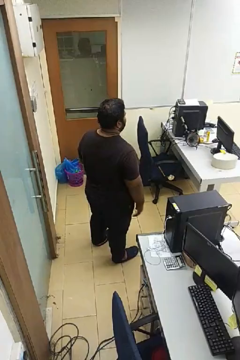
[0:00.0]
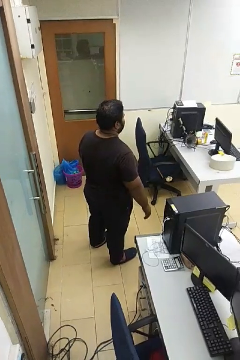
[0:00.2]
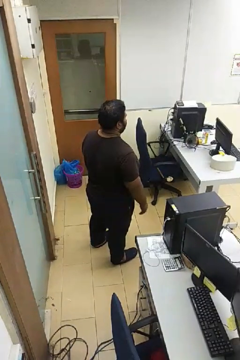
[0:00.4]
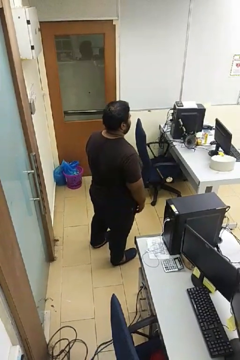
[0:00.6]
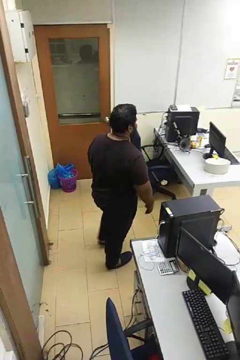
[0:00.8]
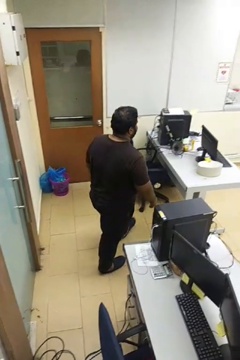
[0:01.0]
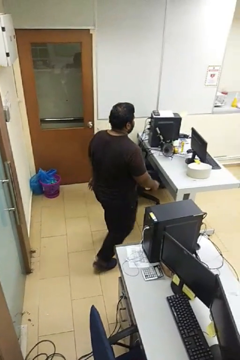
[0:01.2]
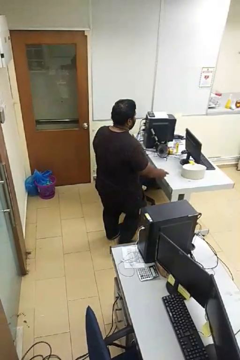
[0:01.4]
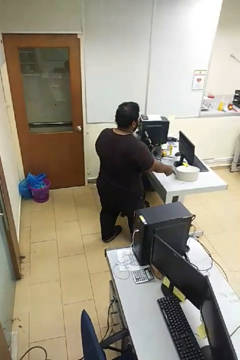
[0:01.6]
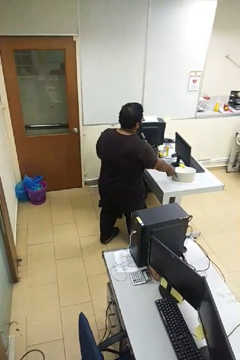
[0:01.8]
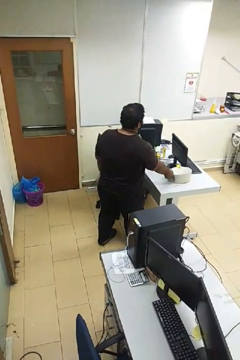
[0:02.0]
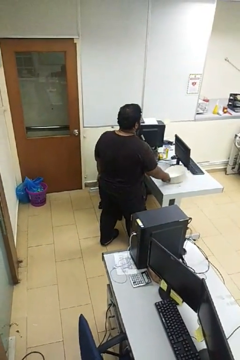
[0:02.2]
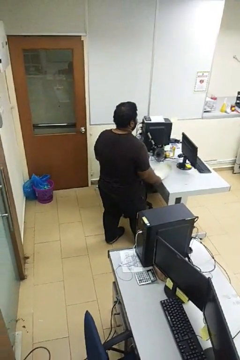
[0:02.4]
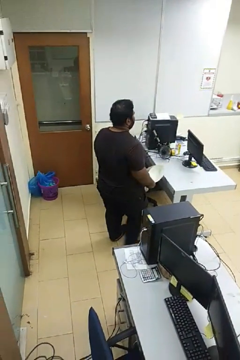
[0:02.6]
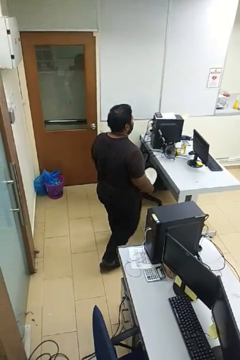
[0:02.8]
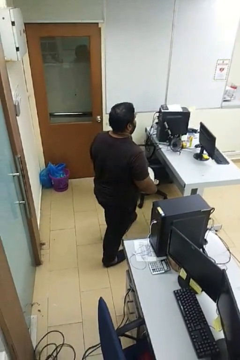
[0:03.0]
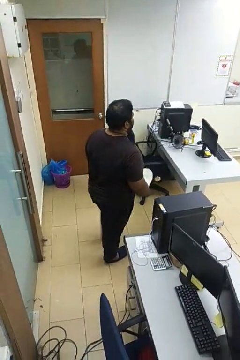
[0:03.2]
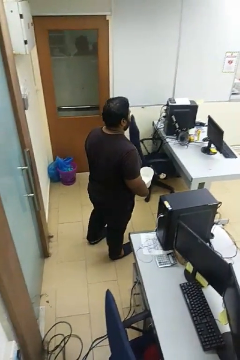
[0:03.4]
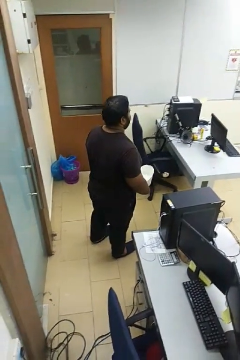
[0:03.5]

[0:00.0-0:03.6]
person picks up object from table

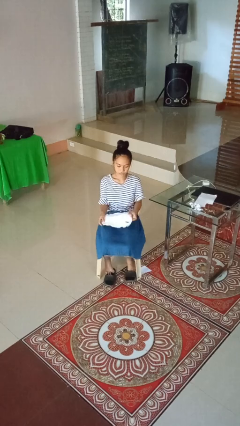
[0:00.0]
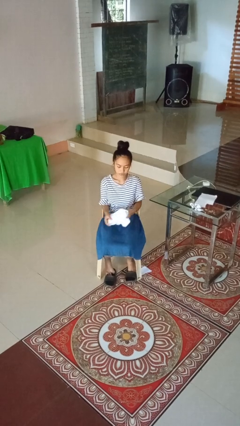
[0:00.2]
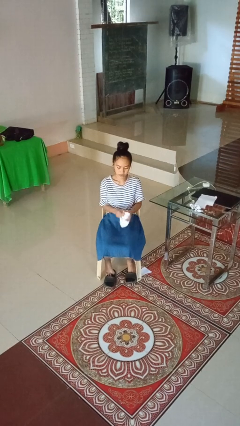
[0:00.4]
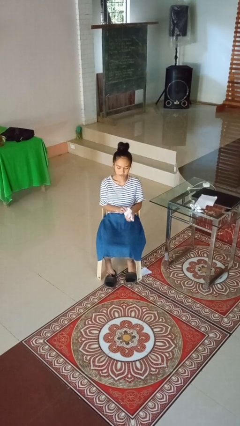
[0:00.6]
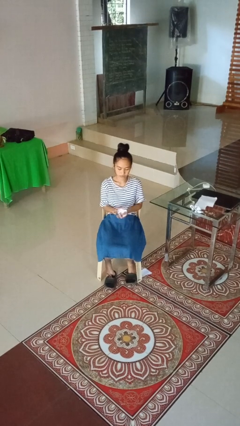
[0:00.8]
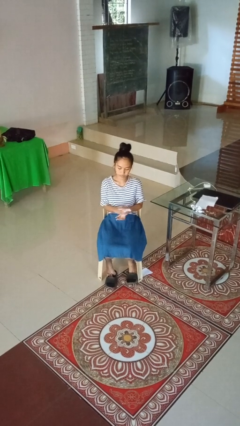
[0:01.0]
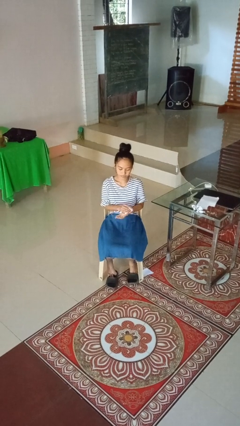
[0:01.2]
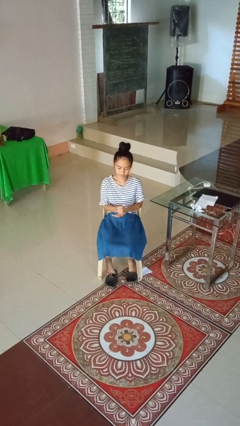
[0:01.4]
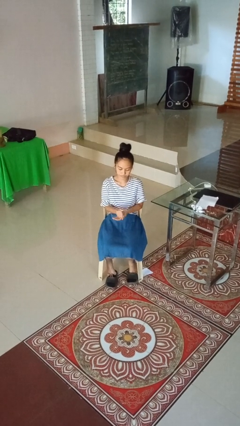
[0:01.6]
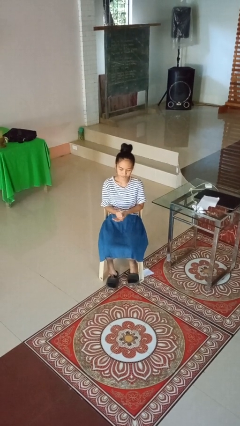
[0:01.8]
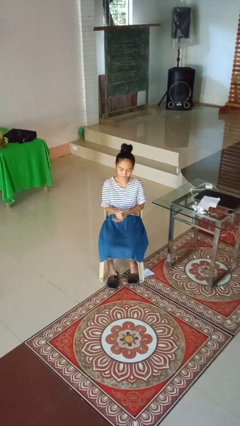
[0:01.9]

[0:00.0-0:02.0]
person crumples paper

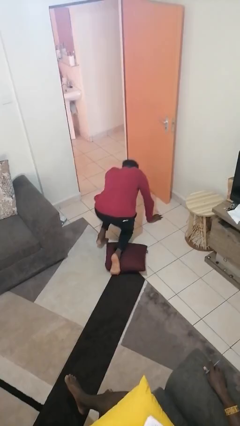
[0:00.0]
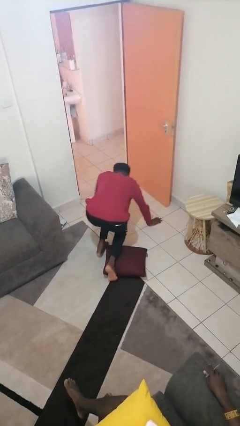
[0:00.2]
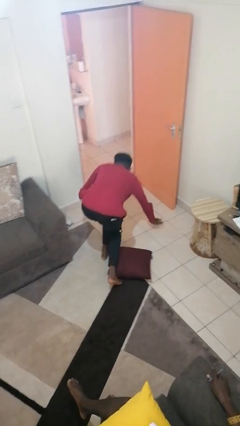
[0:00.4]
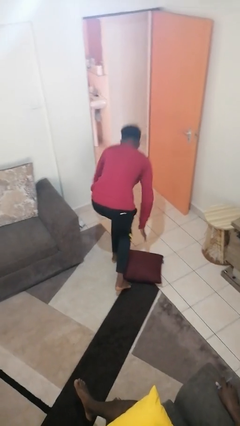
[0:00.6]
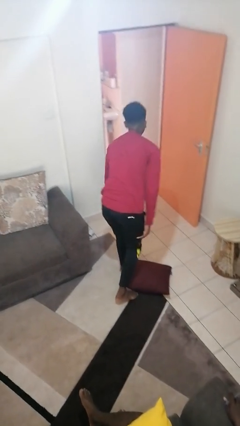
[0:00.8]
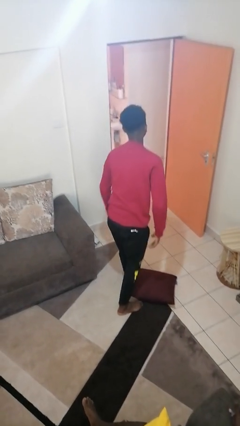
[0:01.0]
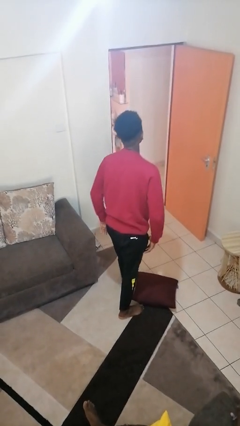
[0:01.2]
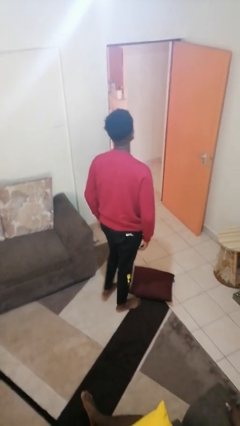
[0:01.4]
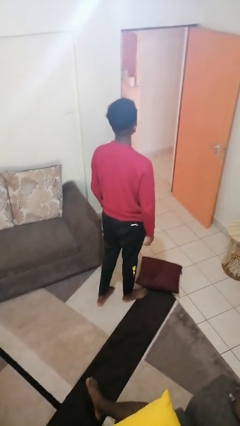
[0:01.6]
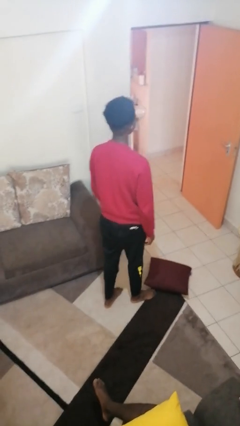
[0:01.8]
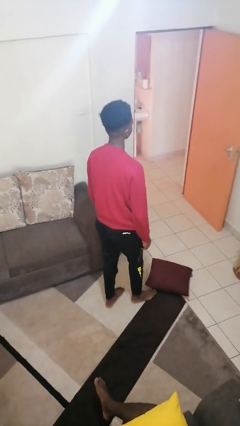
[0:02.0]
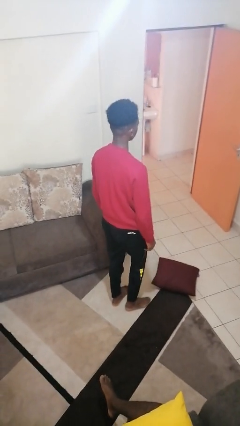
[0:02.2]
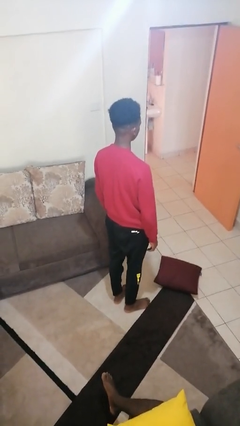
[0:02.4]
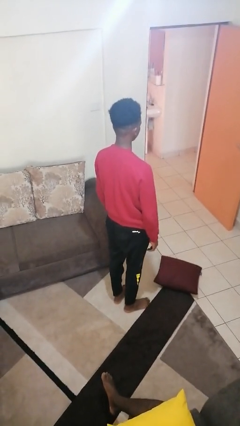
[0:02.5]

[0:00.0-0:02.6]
person stands up from floor

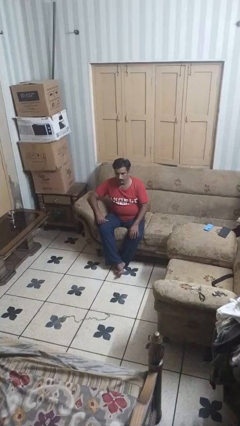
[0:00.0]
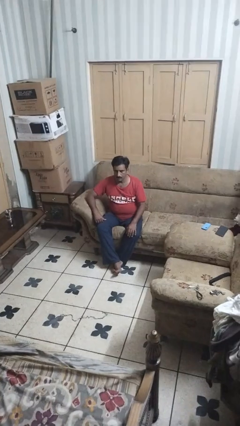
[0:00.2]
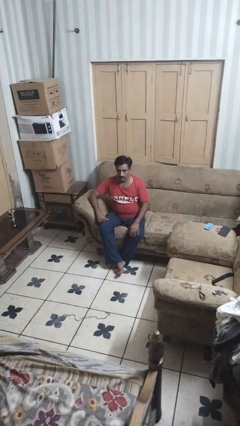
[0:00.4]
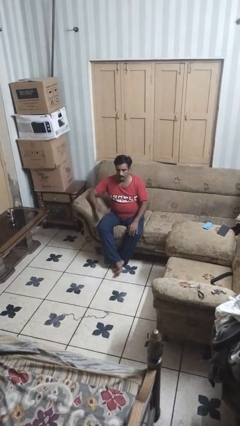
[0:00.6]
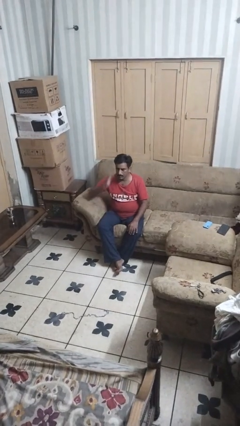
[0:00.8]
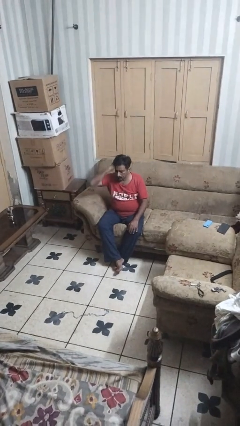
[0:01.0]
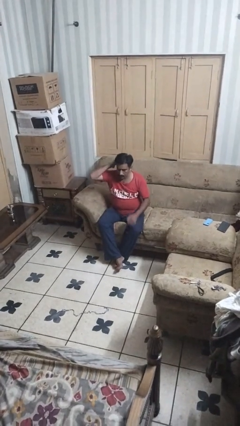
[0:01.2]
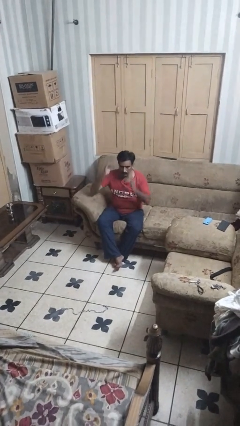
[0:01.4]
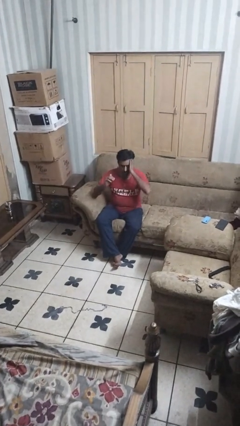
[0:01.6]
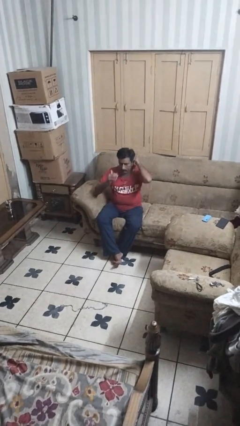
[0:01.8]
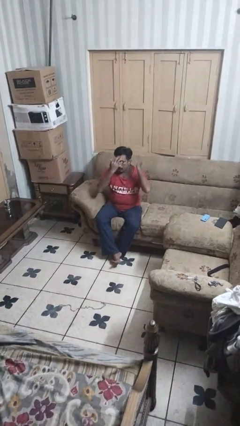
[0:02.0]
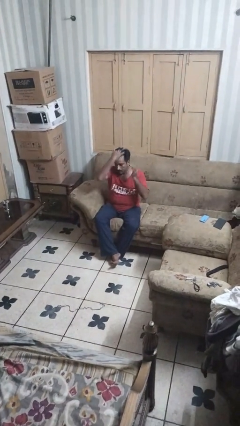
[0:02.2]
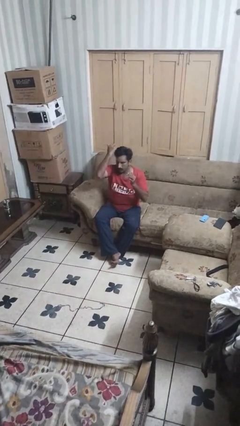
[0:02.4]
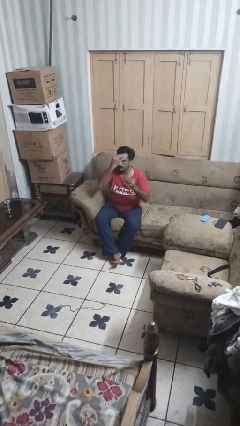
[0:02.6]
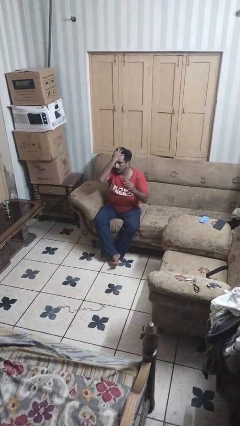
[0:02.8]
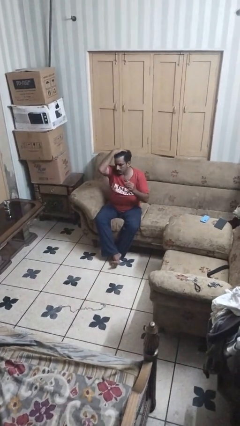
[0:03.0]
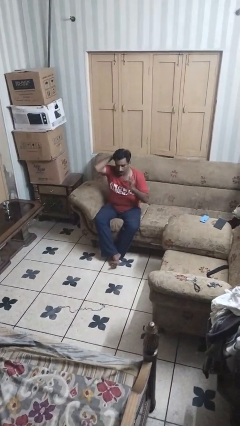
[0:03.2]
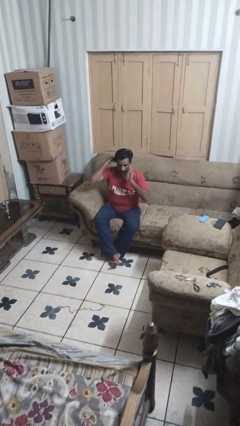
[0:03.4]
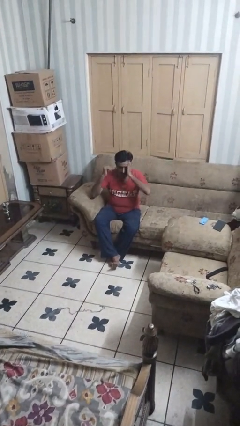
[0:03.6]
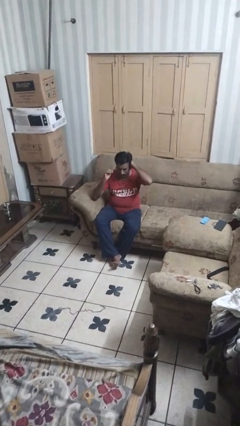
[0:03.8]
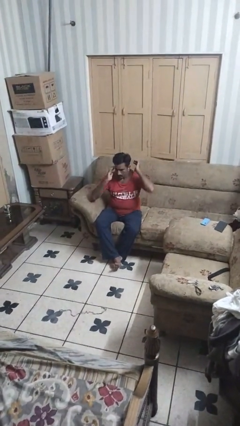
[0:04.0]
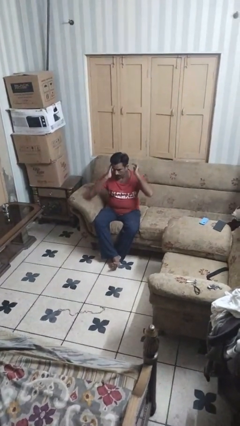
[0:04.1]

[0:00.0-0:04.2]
person strokes hair

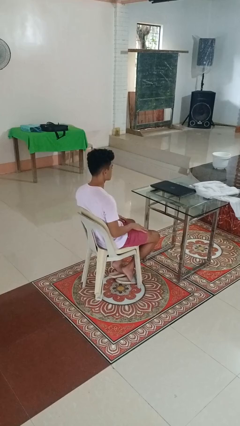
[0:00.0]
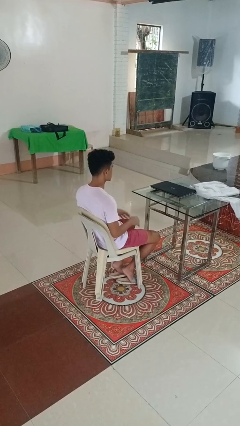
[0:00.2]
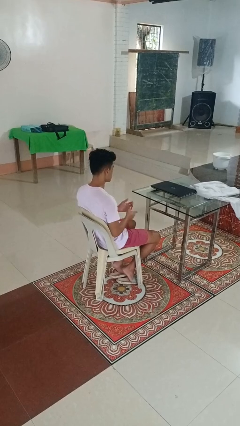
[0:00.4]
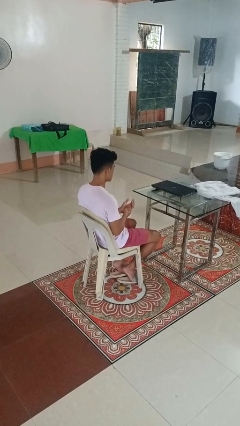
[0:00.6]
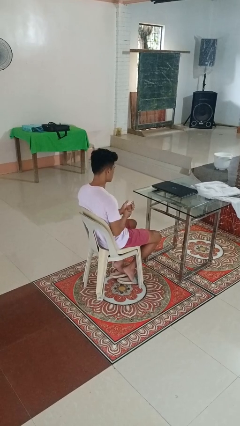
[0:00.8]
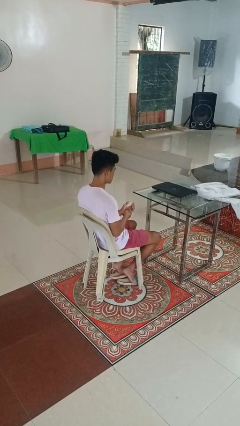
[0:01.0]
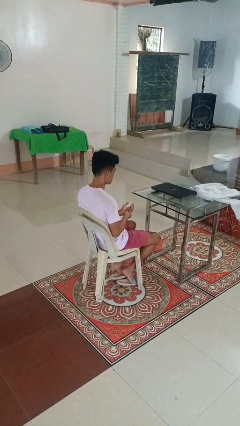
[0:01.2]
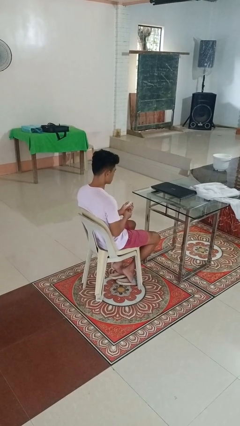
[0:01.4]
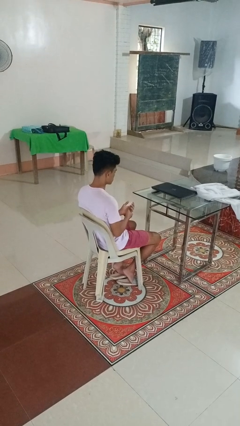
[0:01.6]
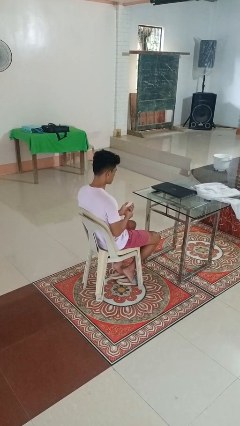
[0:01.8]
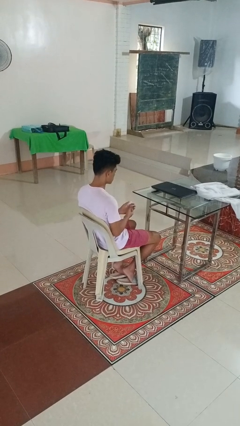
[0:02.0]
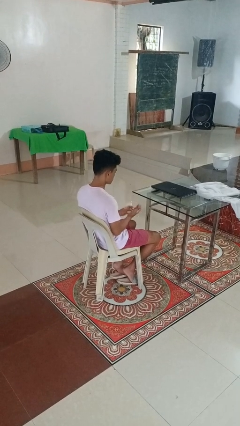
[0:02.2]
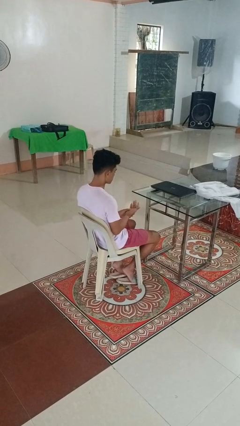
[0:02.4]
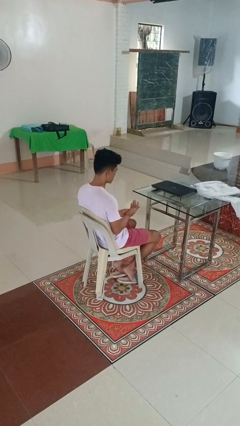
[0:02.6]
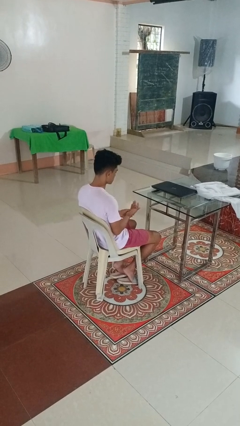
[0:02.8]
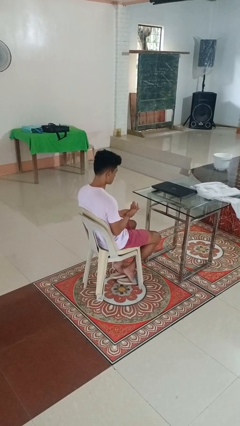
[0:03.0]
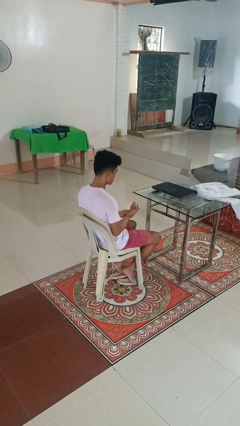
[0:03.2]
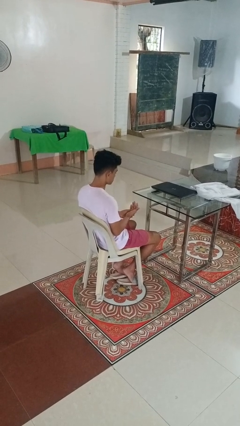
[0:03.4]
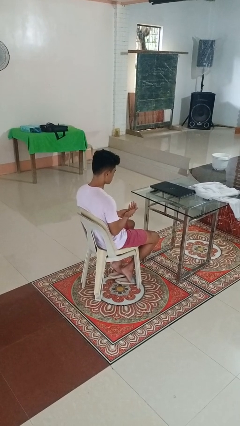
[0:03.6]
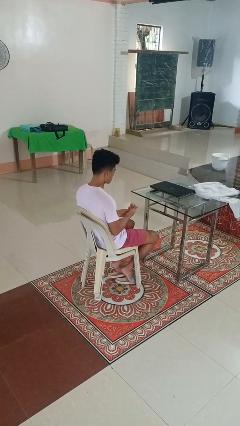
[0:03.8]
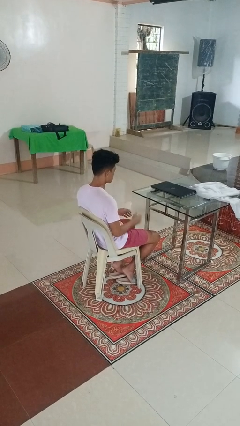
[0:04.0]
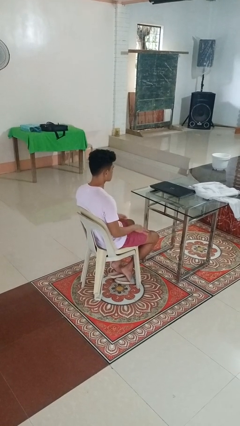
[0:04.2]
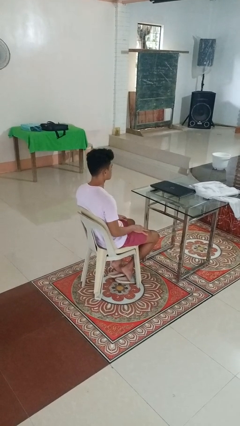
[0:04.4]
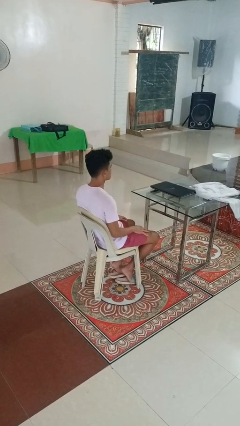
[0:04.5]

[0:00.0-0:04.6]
person looks at hands in lap

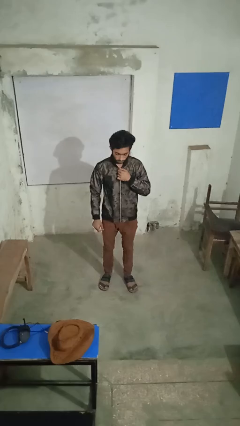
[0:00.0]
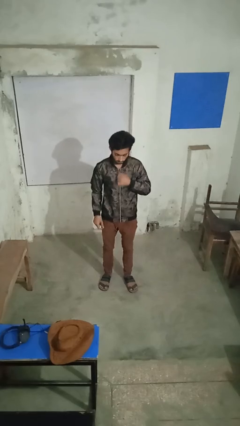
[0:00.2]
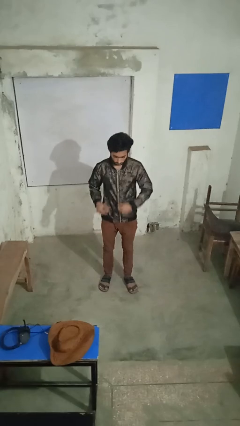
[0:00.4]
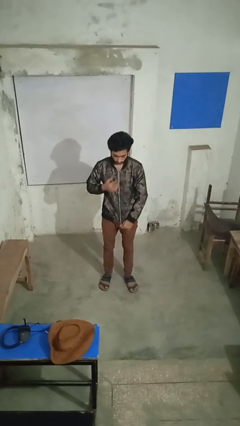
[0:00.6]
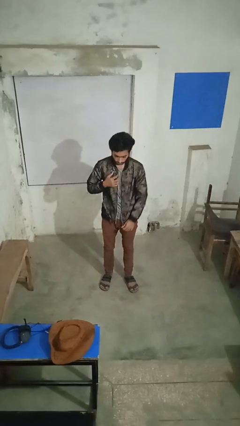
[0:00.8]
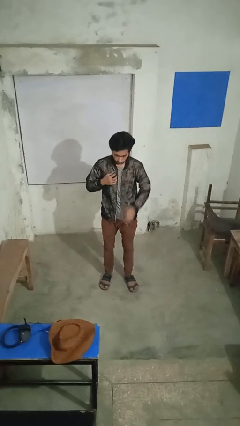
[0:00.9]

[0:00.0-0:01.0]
person unzips jacket
